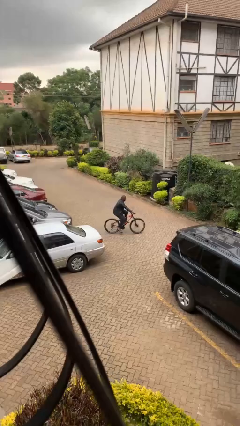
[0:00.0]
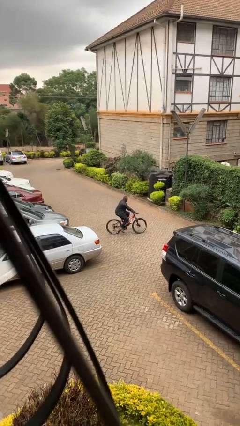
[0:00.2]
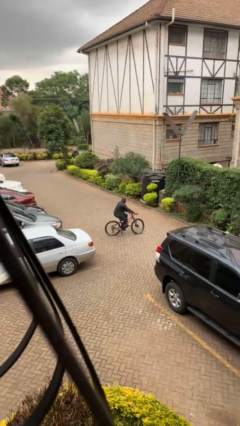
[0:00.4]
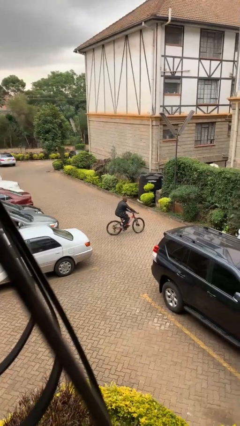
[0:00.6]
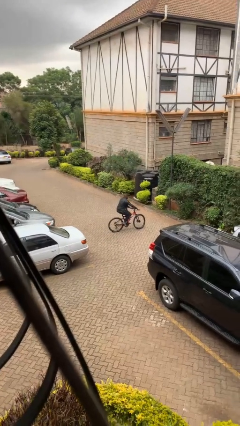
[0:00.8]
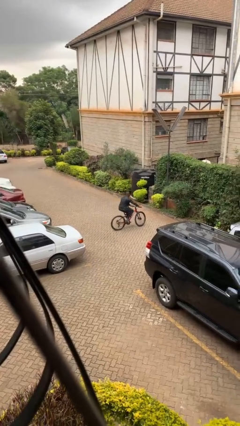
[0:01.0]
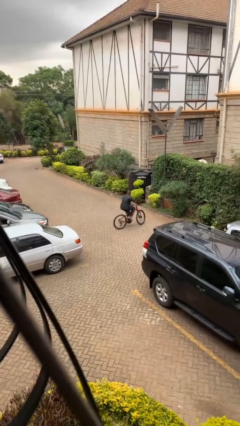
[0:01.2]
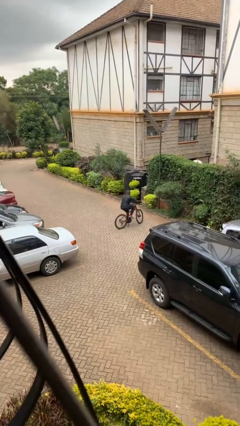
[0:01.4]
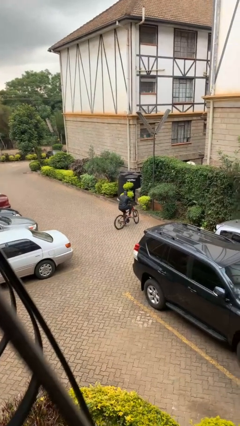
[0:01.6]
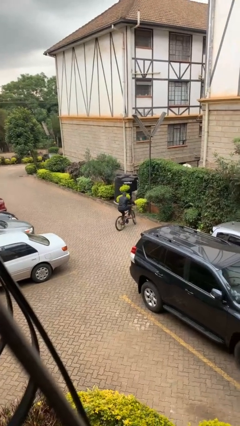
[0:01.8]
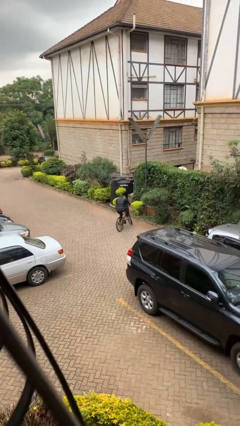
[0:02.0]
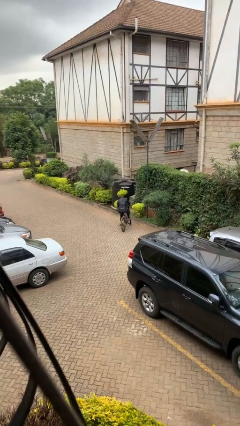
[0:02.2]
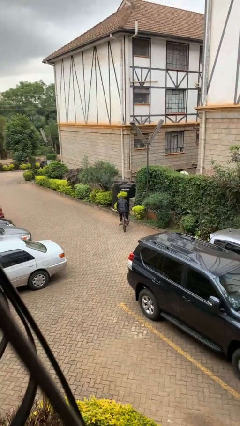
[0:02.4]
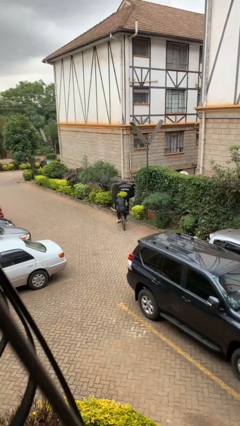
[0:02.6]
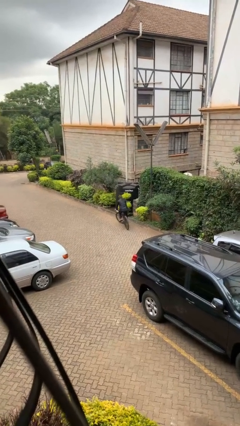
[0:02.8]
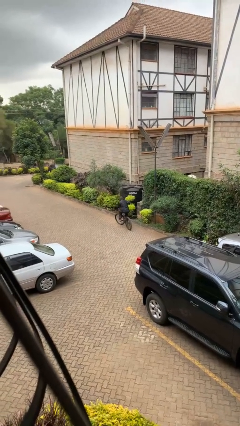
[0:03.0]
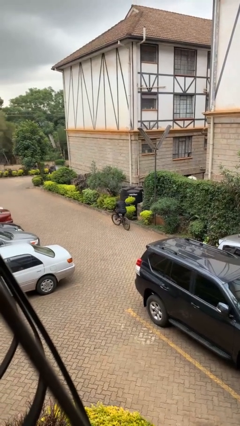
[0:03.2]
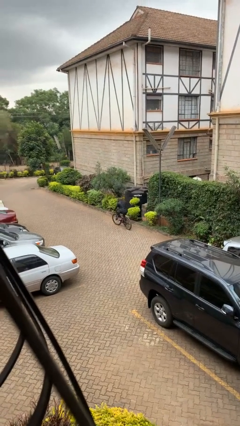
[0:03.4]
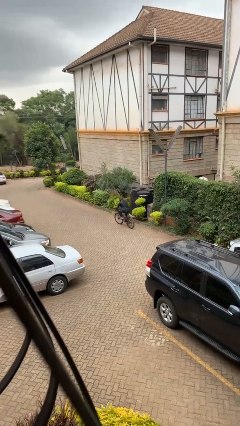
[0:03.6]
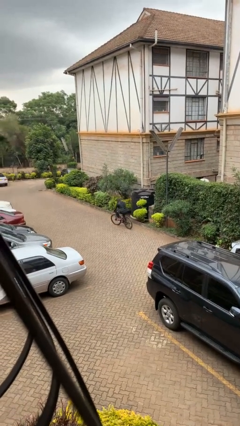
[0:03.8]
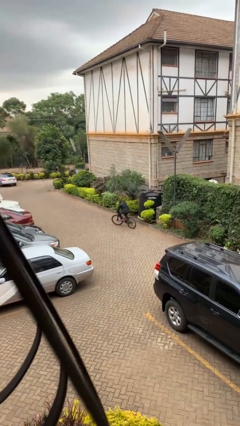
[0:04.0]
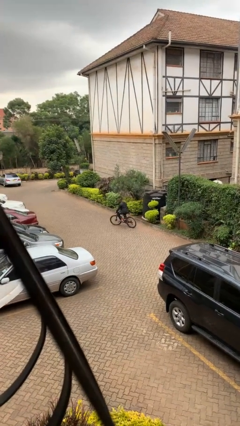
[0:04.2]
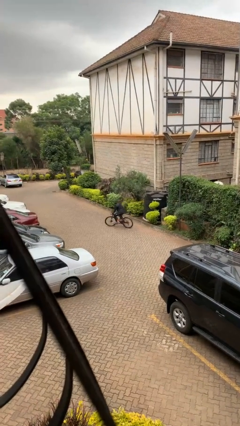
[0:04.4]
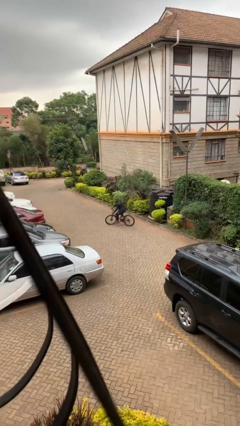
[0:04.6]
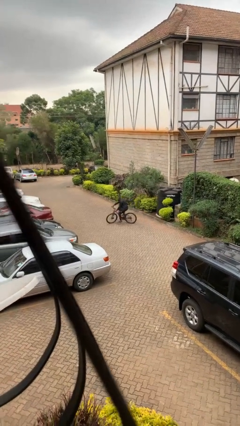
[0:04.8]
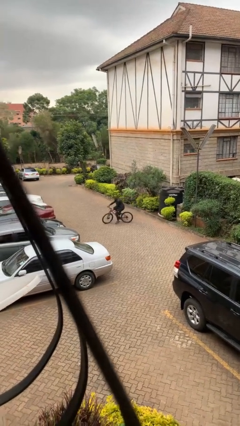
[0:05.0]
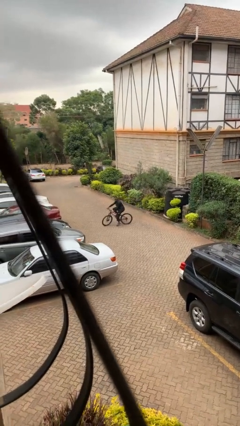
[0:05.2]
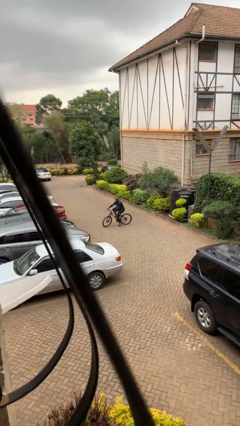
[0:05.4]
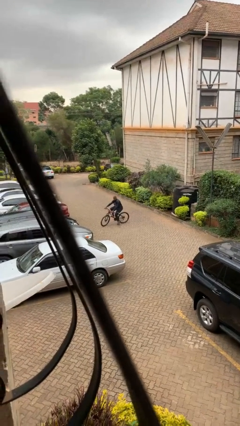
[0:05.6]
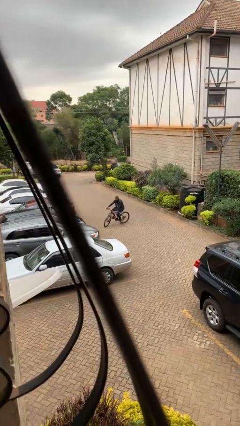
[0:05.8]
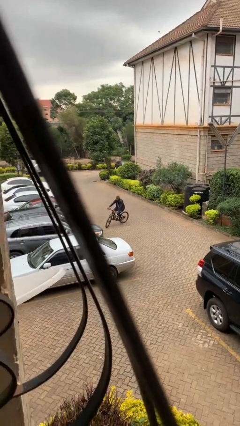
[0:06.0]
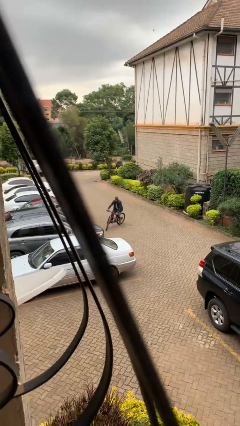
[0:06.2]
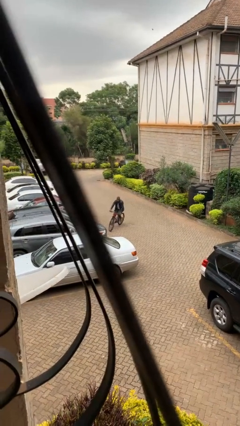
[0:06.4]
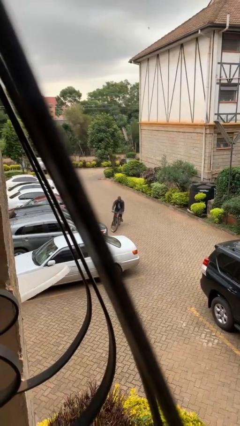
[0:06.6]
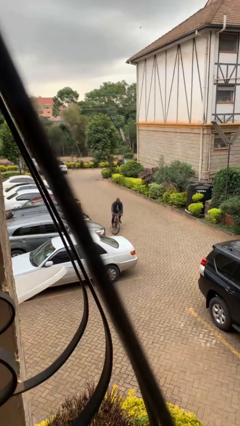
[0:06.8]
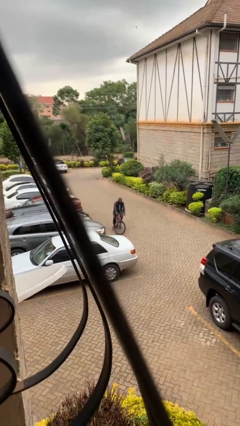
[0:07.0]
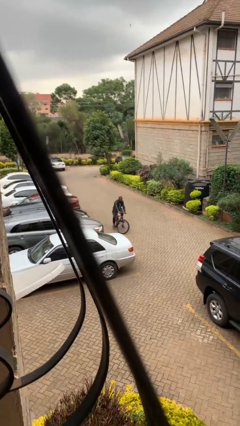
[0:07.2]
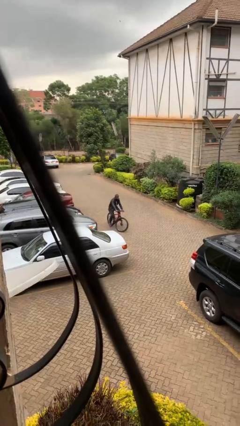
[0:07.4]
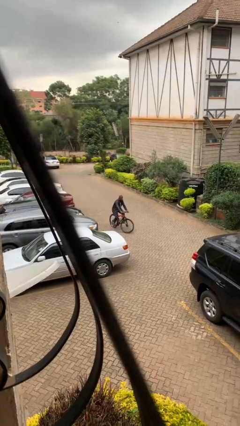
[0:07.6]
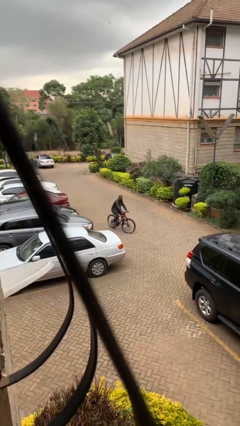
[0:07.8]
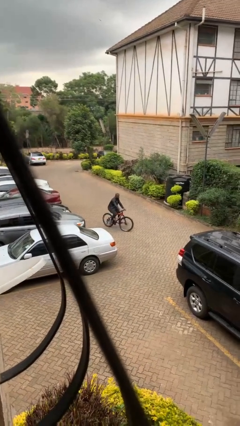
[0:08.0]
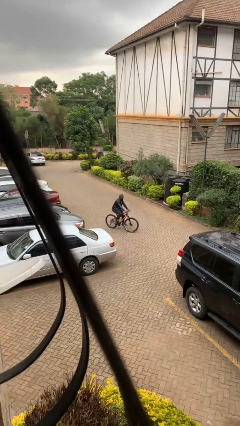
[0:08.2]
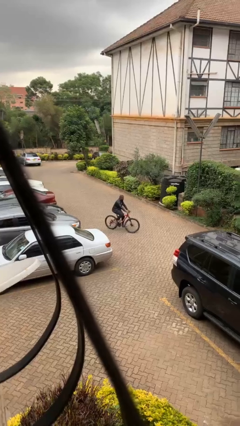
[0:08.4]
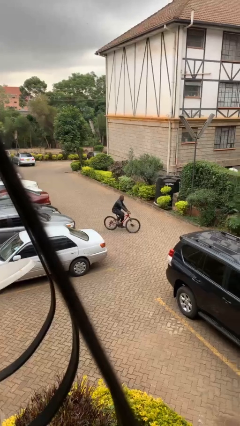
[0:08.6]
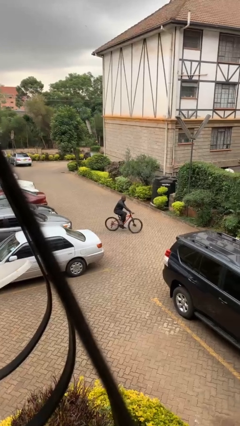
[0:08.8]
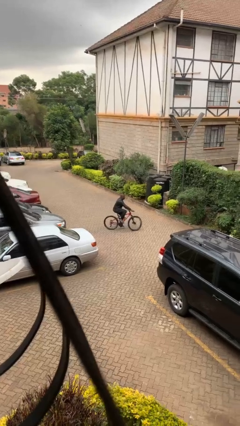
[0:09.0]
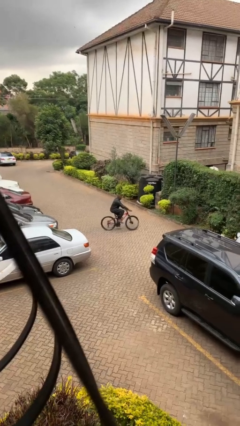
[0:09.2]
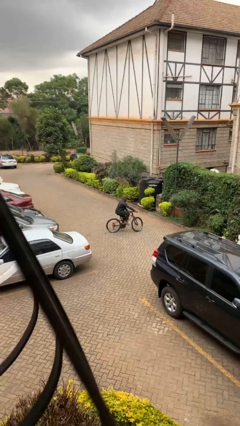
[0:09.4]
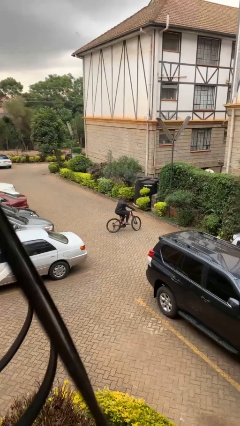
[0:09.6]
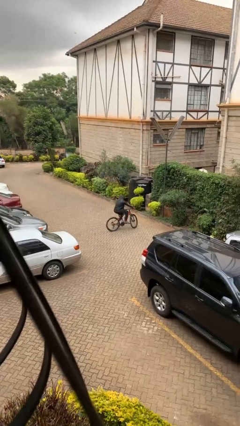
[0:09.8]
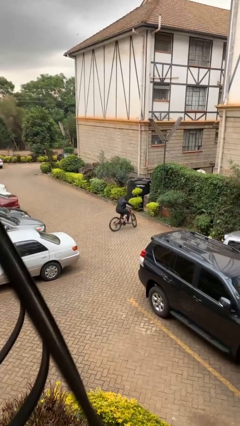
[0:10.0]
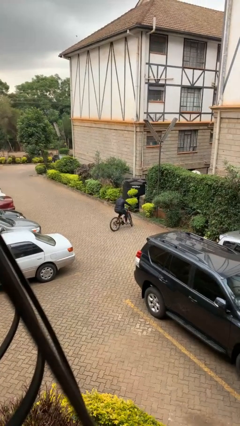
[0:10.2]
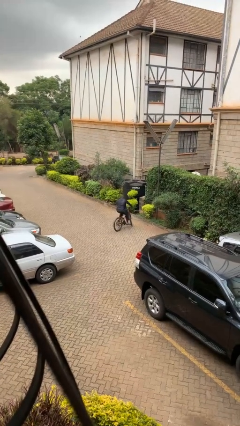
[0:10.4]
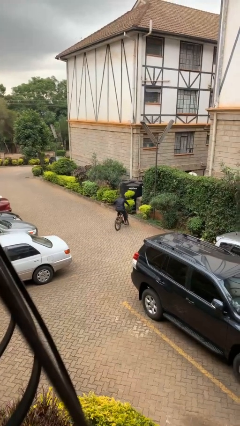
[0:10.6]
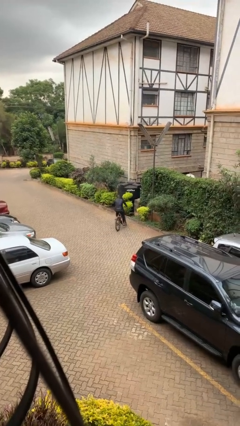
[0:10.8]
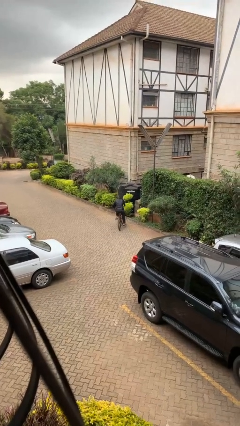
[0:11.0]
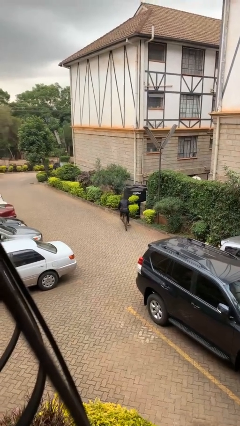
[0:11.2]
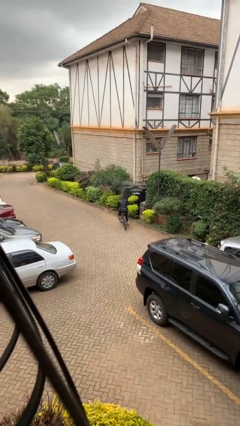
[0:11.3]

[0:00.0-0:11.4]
person rides bicycle

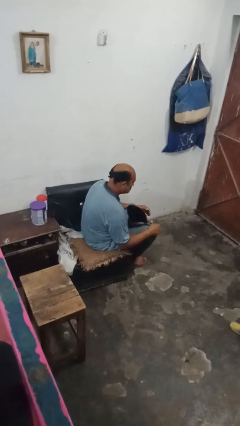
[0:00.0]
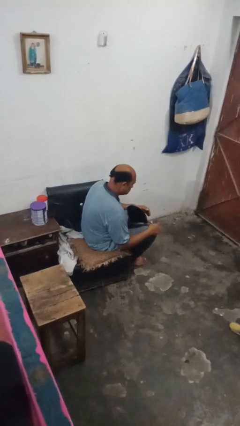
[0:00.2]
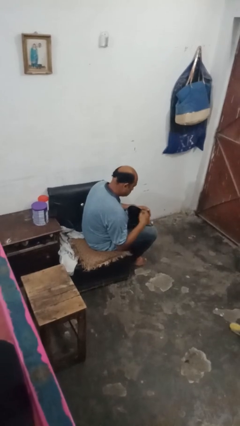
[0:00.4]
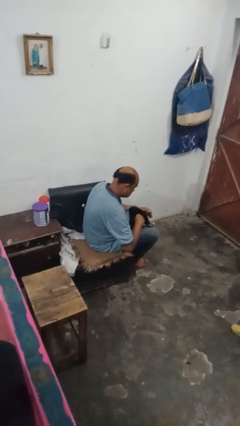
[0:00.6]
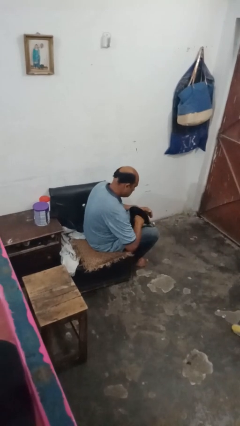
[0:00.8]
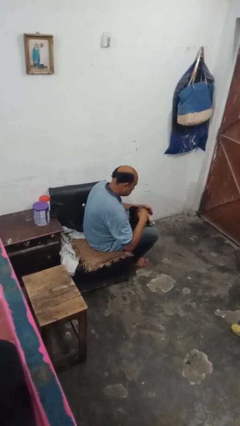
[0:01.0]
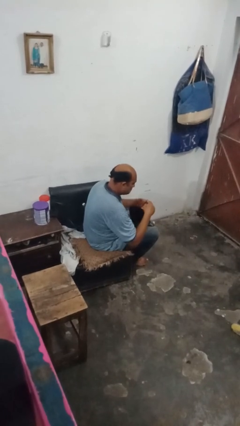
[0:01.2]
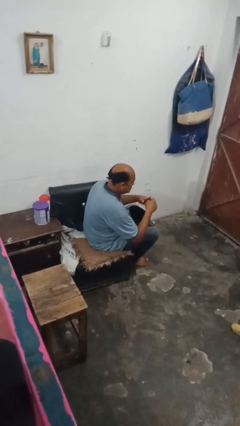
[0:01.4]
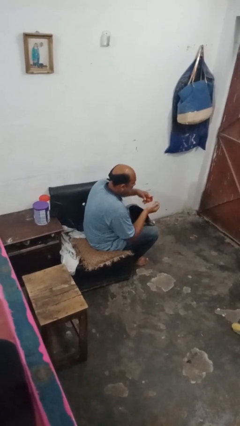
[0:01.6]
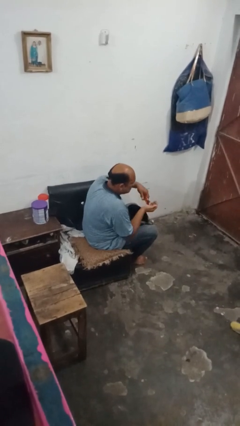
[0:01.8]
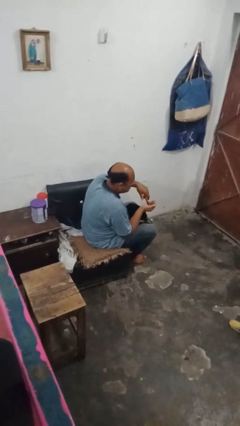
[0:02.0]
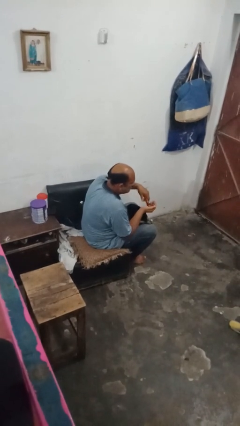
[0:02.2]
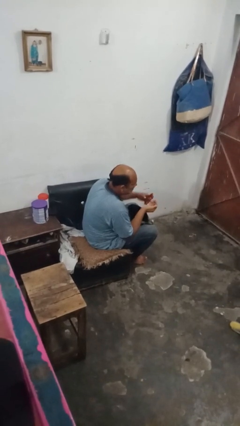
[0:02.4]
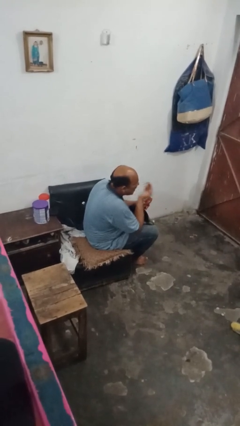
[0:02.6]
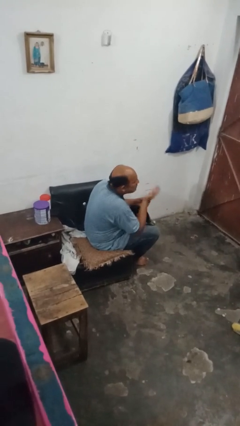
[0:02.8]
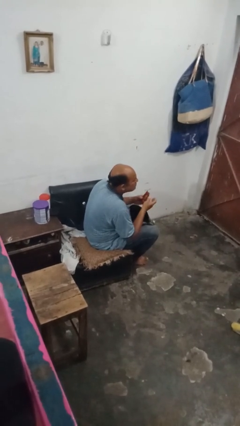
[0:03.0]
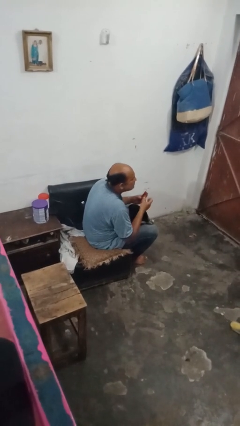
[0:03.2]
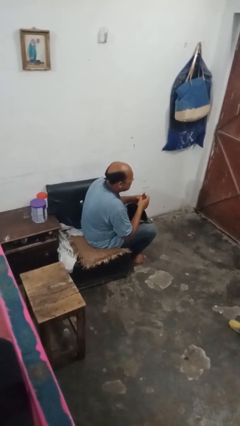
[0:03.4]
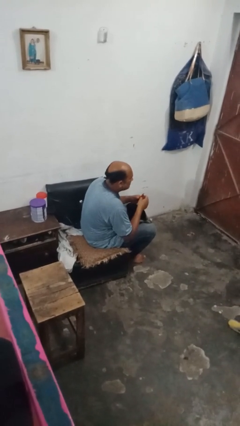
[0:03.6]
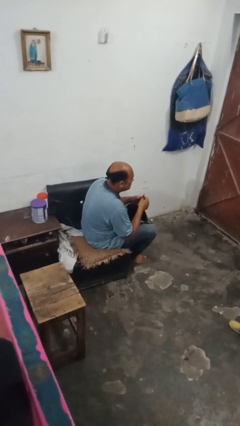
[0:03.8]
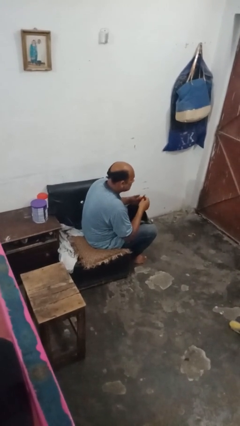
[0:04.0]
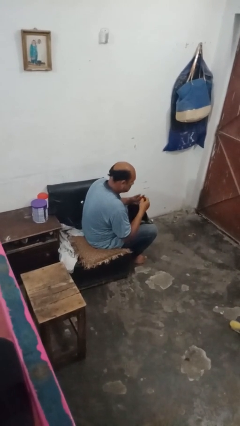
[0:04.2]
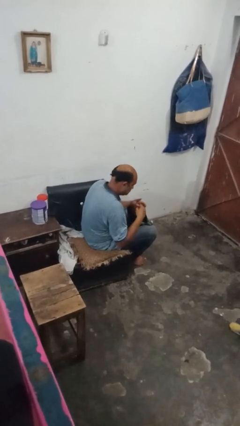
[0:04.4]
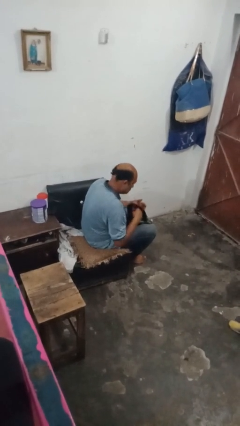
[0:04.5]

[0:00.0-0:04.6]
person eats snack from bag

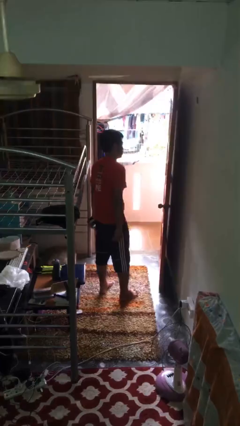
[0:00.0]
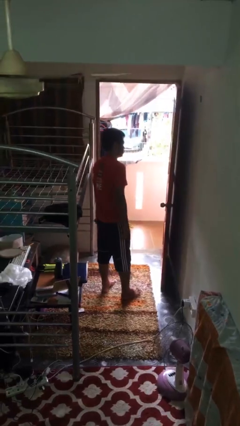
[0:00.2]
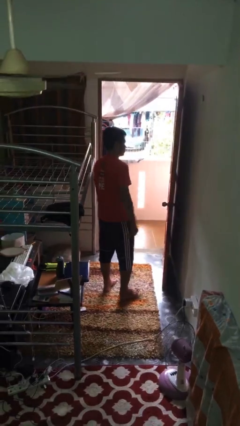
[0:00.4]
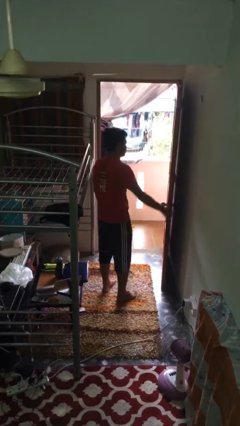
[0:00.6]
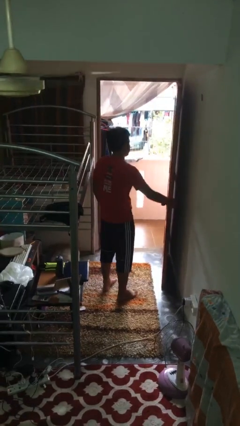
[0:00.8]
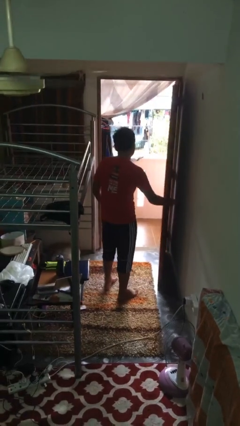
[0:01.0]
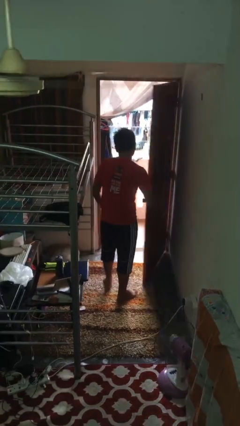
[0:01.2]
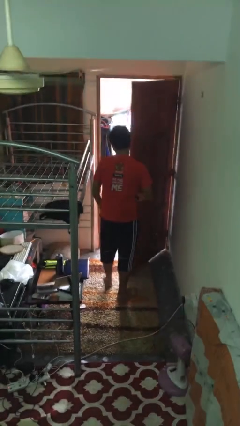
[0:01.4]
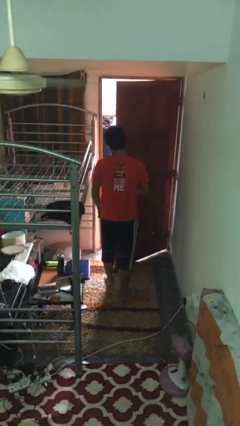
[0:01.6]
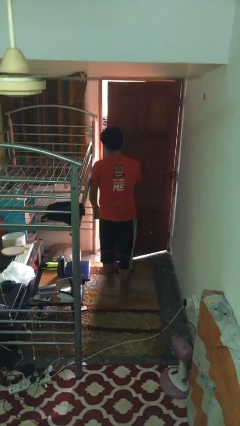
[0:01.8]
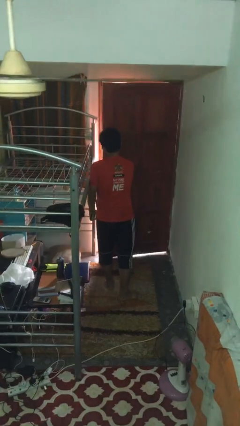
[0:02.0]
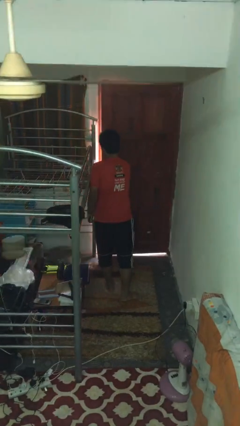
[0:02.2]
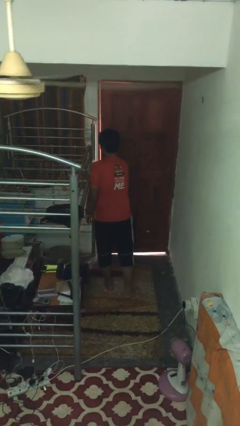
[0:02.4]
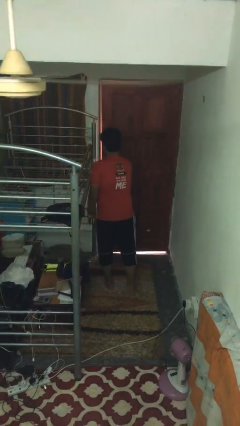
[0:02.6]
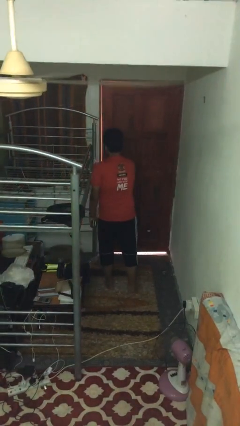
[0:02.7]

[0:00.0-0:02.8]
person closes facility door
